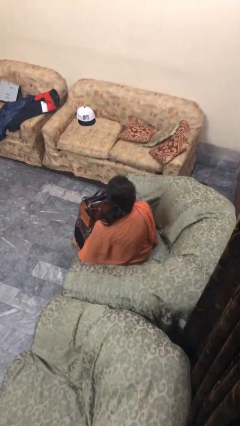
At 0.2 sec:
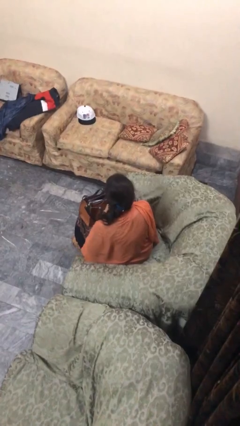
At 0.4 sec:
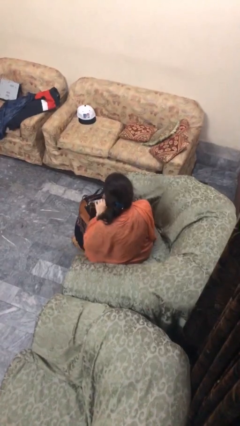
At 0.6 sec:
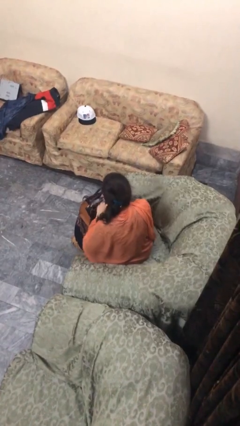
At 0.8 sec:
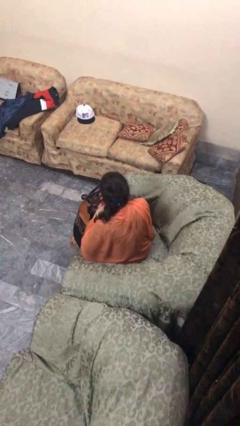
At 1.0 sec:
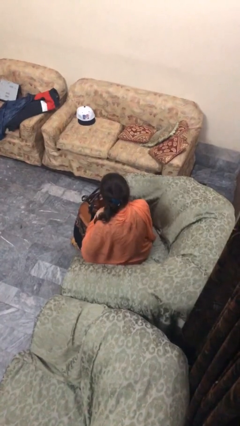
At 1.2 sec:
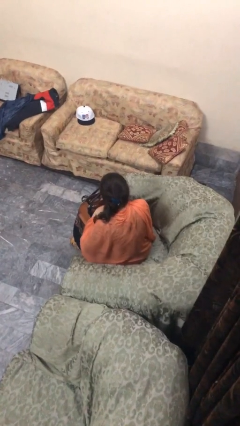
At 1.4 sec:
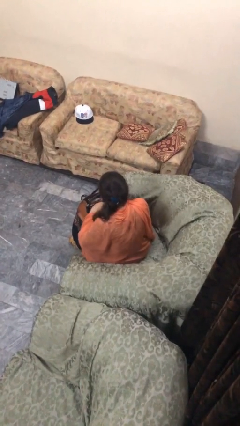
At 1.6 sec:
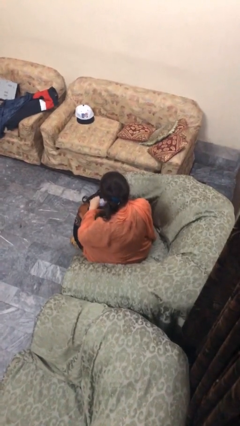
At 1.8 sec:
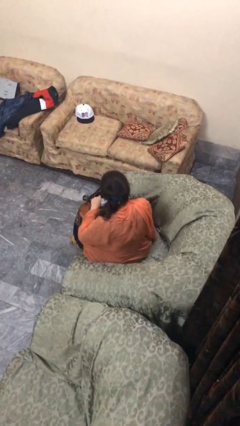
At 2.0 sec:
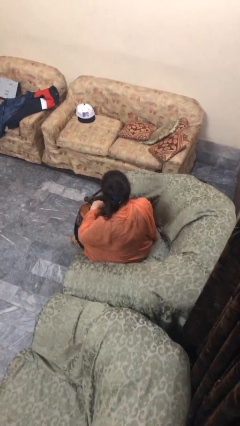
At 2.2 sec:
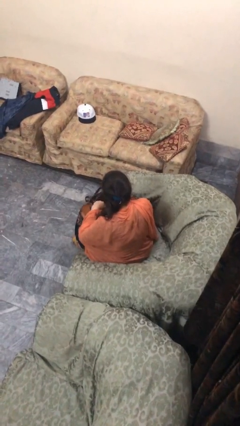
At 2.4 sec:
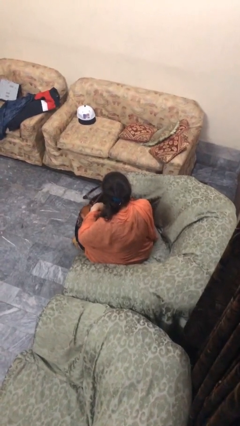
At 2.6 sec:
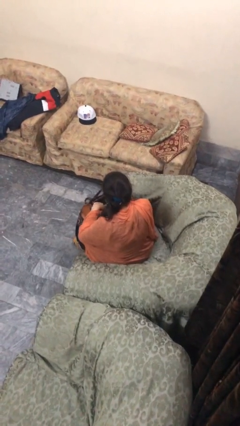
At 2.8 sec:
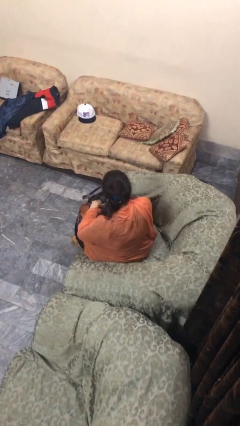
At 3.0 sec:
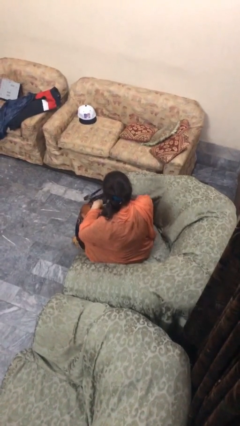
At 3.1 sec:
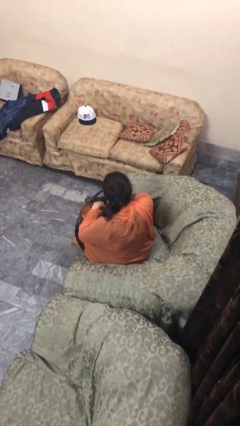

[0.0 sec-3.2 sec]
person searches in purse

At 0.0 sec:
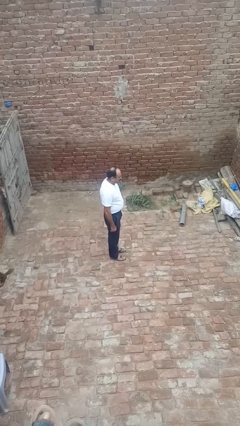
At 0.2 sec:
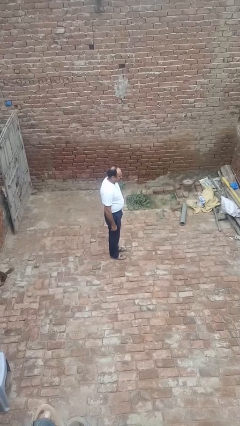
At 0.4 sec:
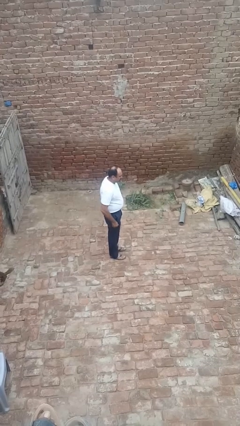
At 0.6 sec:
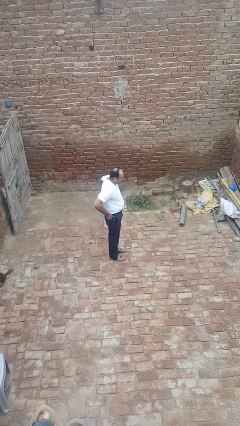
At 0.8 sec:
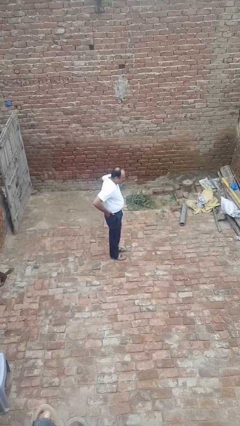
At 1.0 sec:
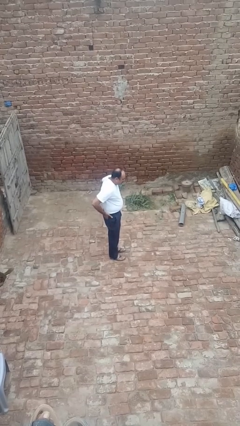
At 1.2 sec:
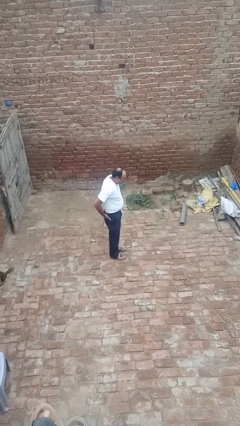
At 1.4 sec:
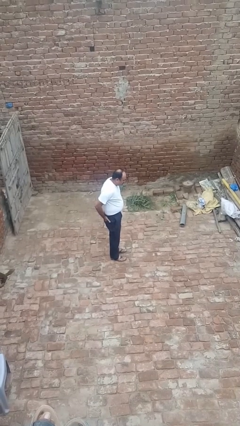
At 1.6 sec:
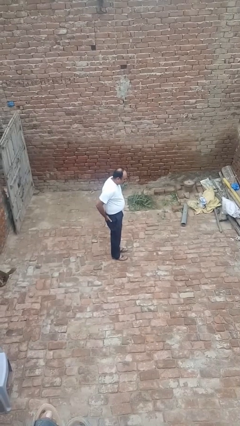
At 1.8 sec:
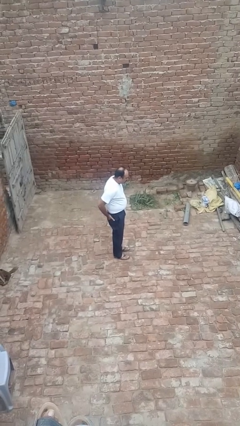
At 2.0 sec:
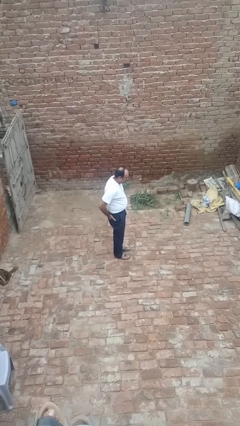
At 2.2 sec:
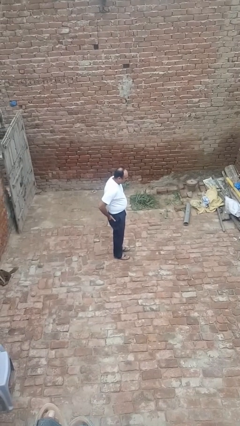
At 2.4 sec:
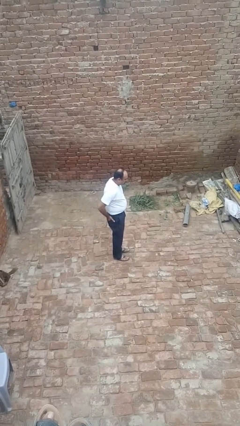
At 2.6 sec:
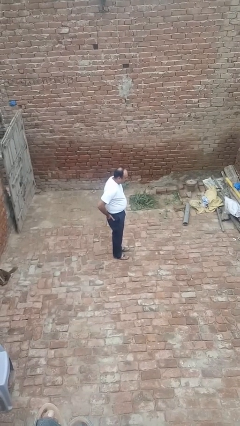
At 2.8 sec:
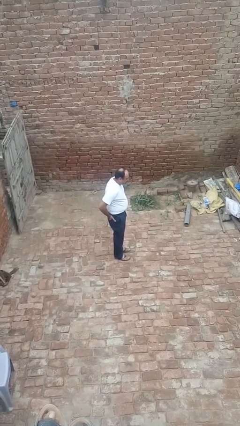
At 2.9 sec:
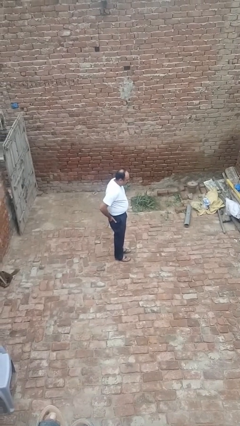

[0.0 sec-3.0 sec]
person puts hands in back pockets

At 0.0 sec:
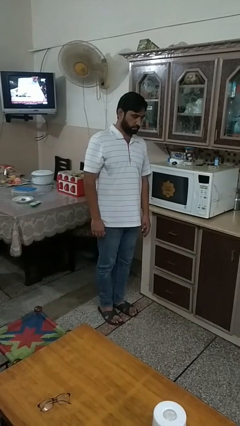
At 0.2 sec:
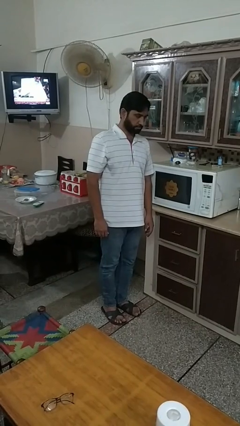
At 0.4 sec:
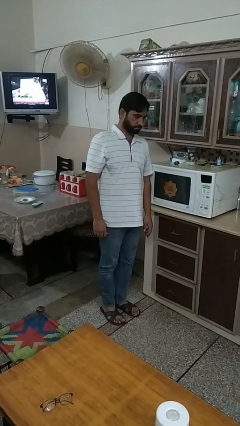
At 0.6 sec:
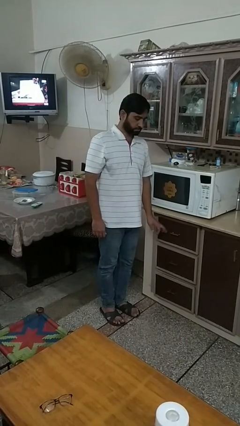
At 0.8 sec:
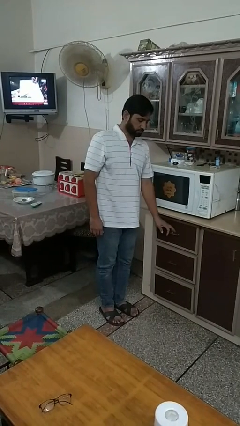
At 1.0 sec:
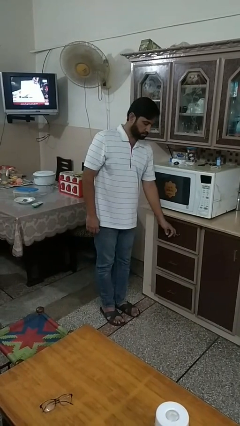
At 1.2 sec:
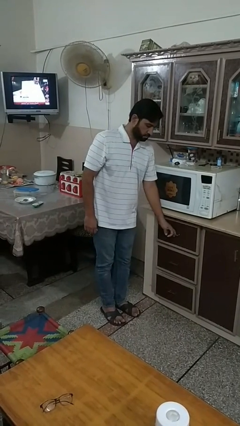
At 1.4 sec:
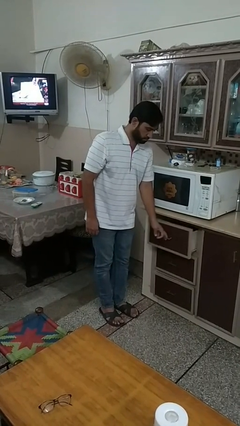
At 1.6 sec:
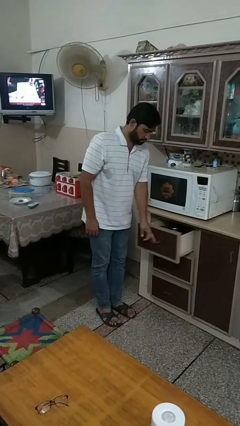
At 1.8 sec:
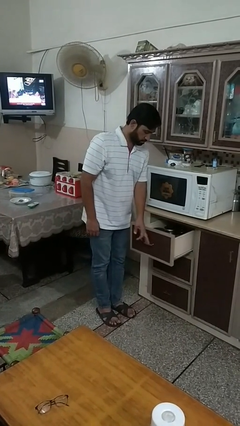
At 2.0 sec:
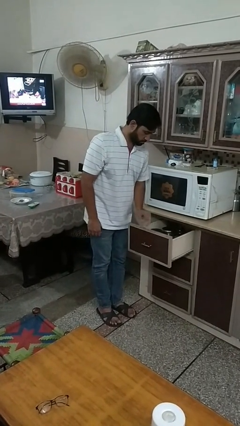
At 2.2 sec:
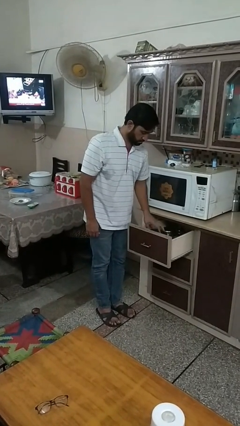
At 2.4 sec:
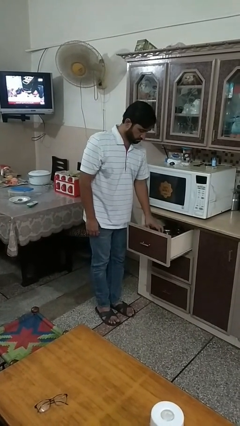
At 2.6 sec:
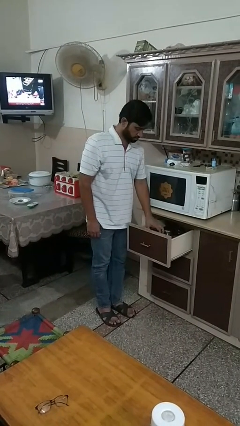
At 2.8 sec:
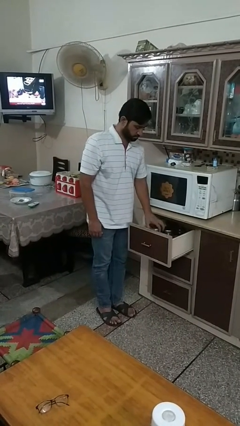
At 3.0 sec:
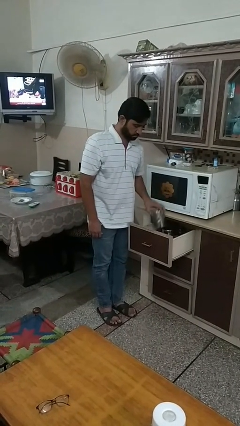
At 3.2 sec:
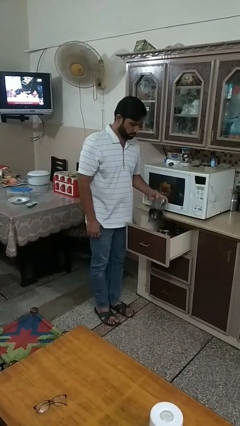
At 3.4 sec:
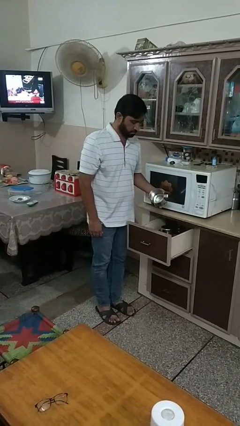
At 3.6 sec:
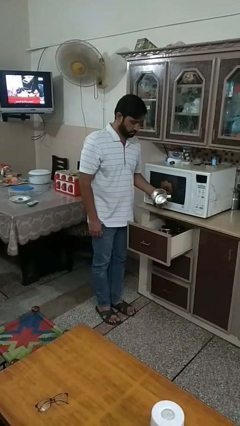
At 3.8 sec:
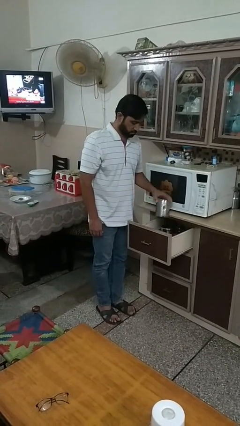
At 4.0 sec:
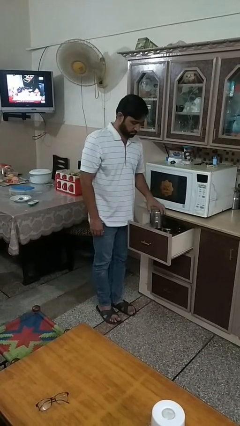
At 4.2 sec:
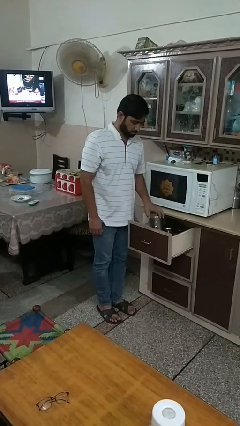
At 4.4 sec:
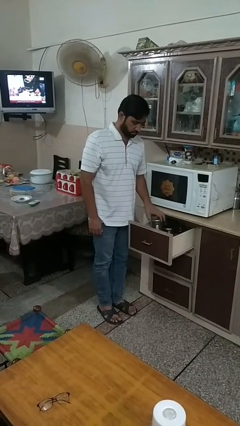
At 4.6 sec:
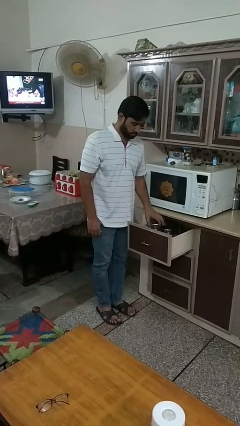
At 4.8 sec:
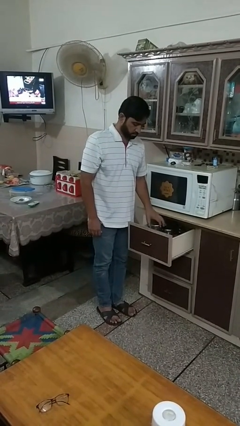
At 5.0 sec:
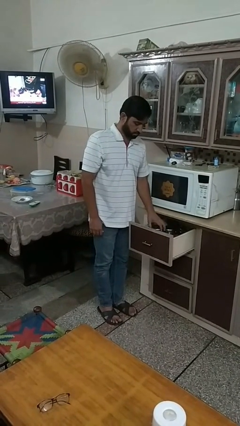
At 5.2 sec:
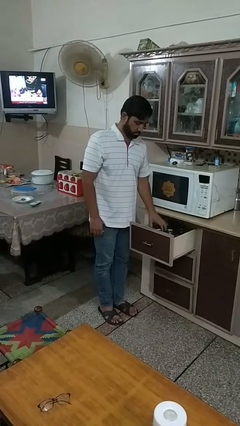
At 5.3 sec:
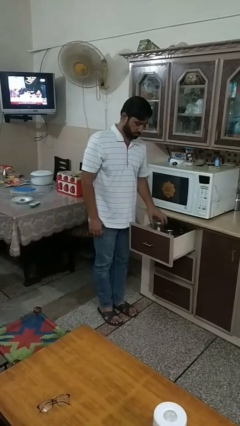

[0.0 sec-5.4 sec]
person takes object from kitchen drawer

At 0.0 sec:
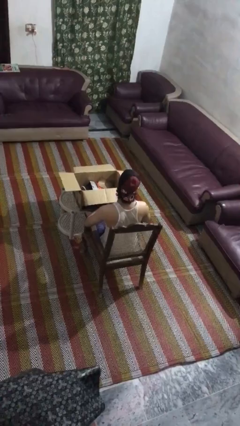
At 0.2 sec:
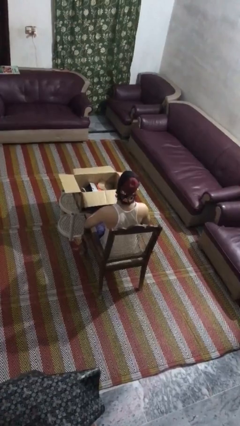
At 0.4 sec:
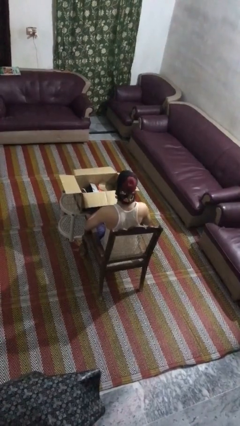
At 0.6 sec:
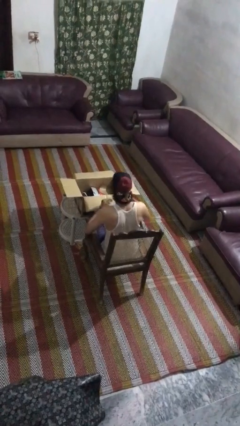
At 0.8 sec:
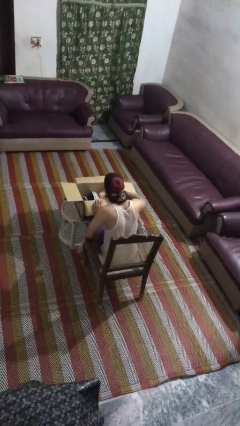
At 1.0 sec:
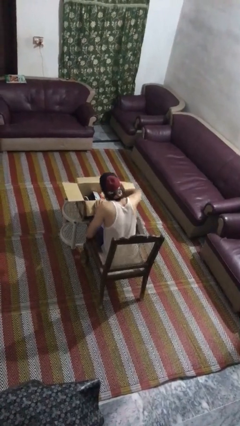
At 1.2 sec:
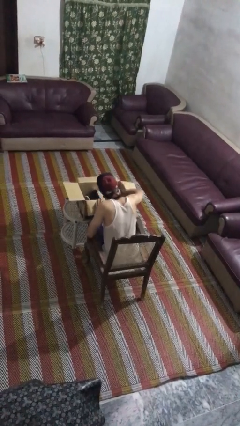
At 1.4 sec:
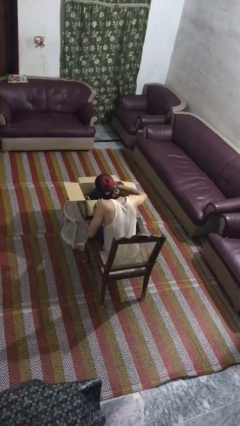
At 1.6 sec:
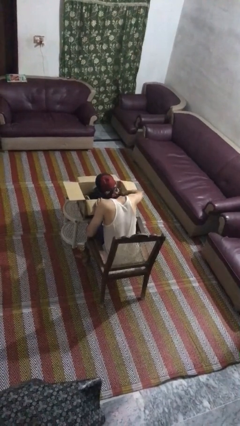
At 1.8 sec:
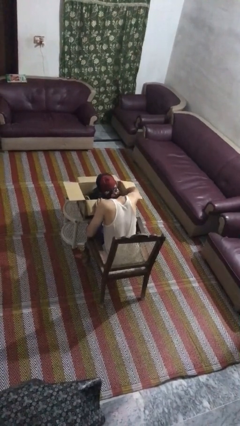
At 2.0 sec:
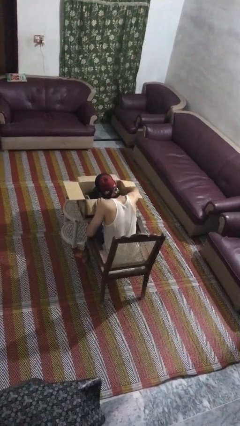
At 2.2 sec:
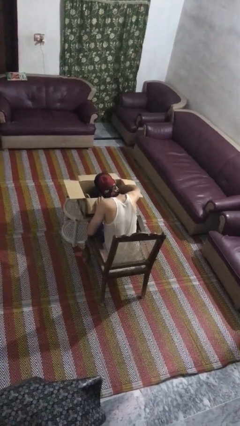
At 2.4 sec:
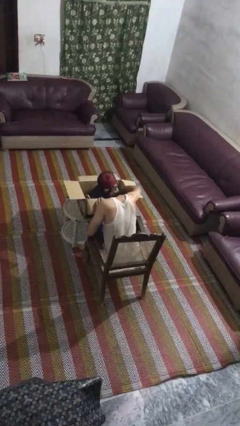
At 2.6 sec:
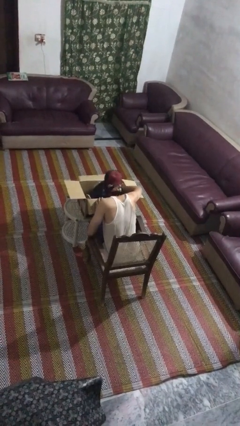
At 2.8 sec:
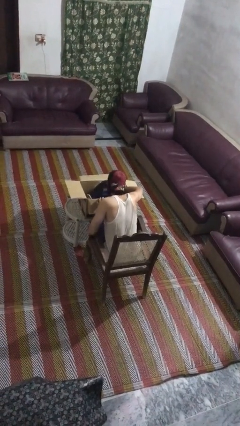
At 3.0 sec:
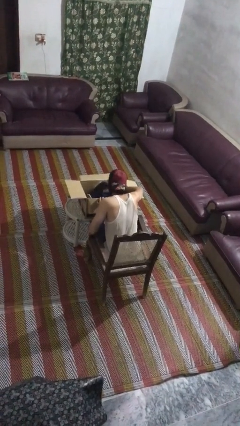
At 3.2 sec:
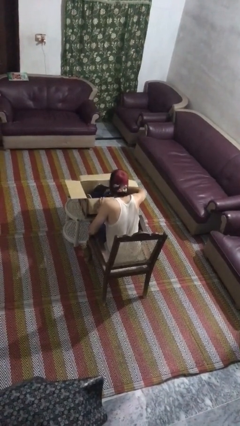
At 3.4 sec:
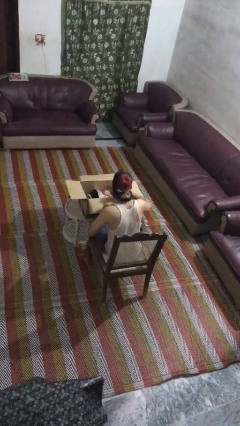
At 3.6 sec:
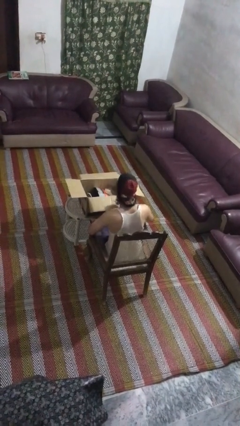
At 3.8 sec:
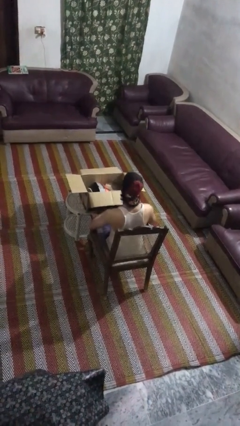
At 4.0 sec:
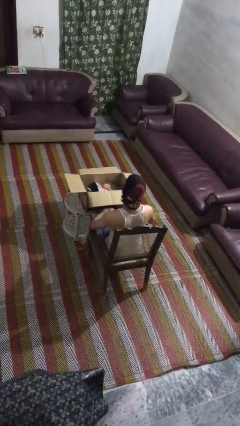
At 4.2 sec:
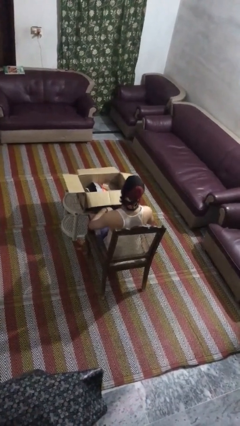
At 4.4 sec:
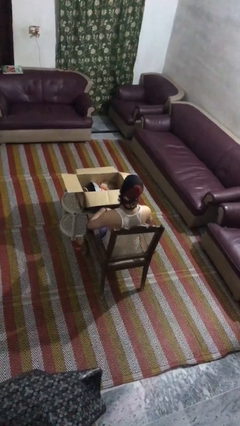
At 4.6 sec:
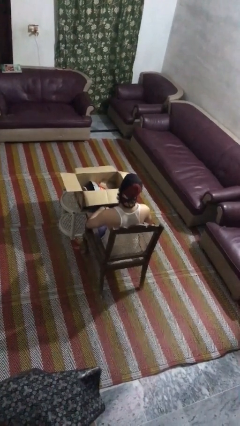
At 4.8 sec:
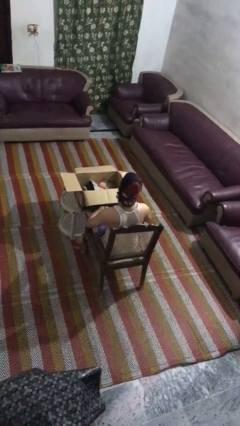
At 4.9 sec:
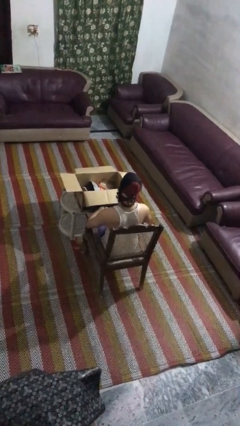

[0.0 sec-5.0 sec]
person searches in box

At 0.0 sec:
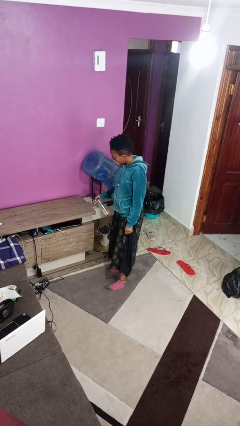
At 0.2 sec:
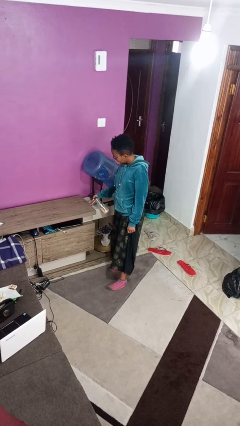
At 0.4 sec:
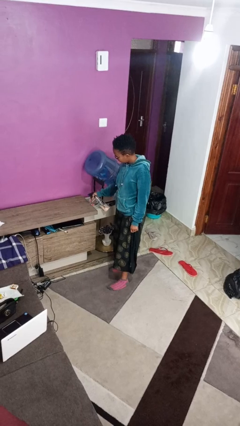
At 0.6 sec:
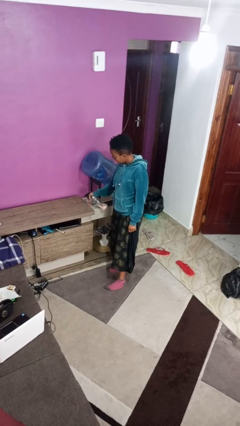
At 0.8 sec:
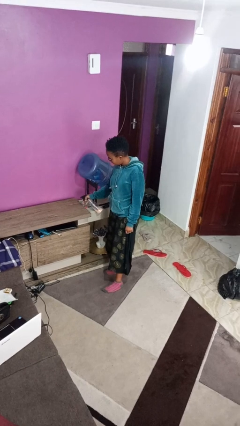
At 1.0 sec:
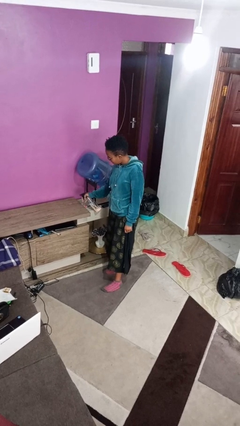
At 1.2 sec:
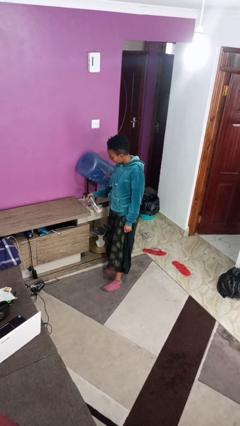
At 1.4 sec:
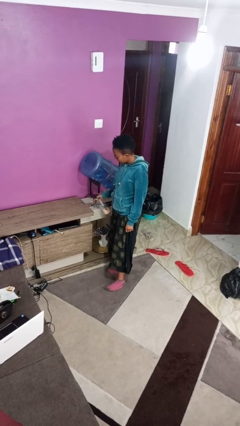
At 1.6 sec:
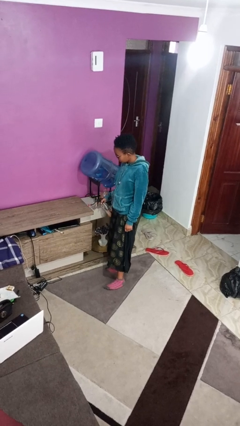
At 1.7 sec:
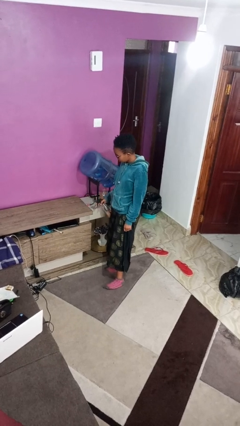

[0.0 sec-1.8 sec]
person sprays from bottle
